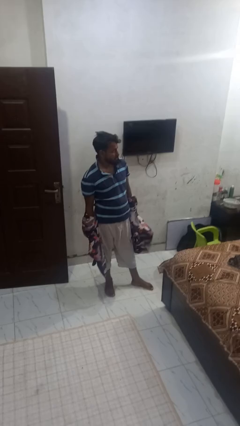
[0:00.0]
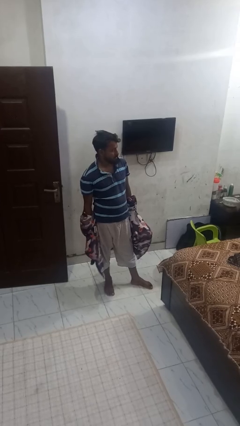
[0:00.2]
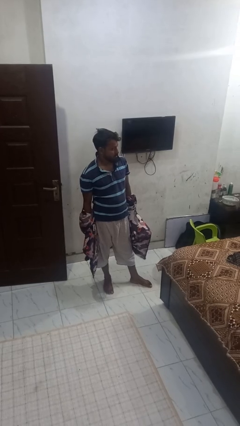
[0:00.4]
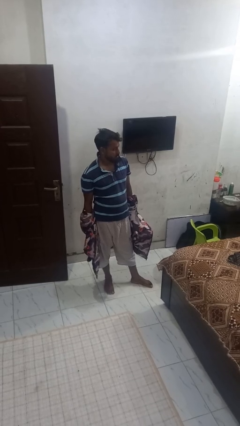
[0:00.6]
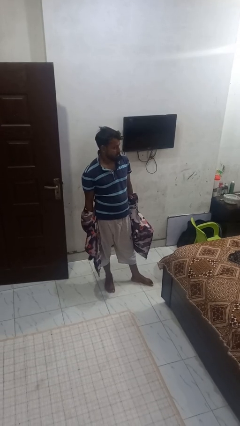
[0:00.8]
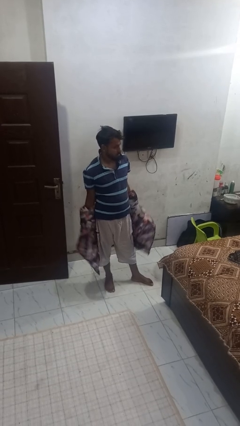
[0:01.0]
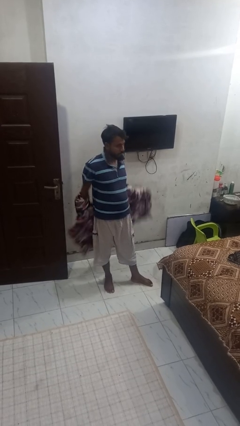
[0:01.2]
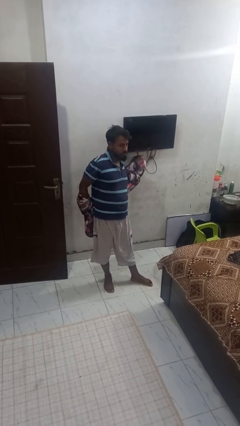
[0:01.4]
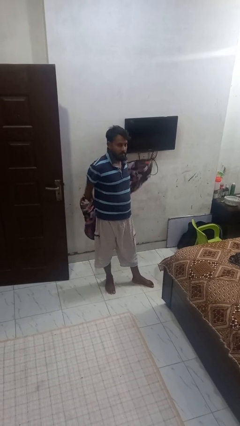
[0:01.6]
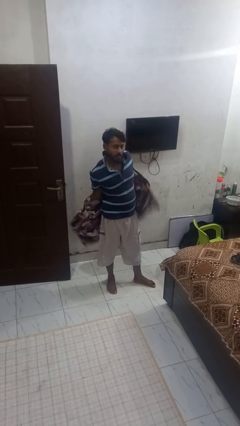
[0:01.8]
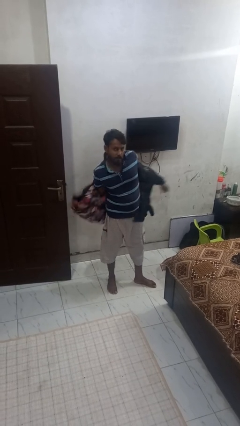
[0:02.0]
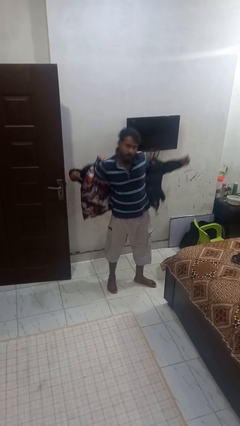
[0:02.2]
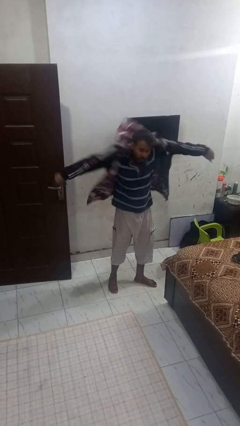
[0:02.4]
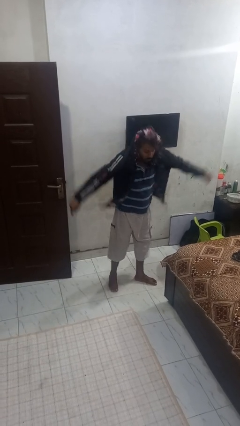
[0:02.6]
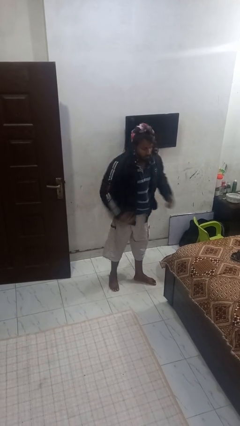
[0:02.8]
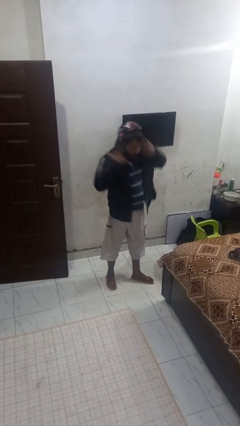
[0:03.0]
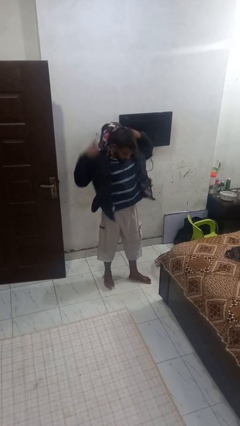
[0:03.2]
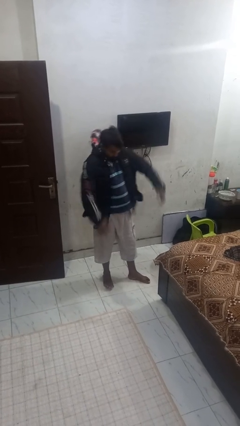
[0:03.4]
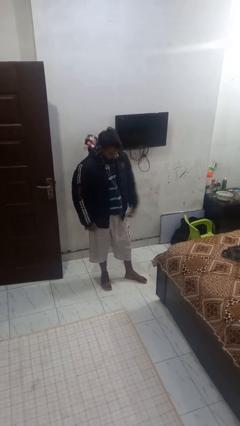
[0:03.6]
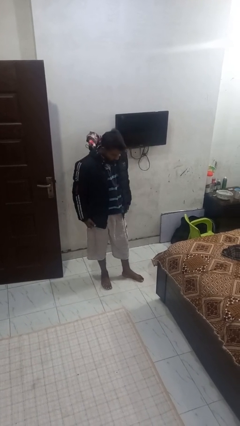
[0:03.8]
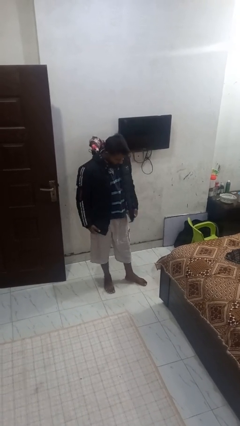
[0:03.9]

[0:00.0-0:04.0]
person puts on jacket

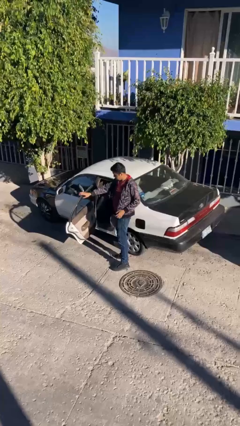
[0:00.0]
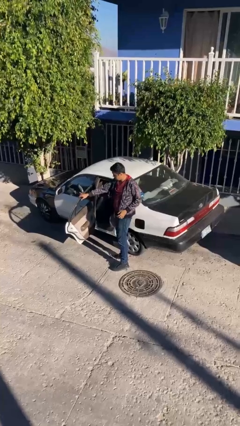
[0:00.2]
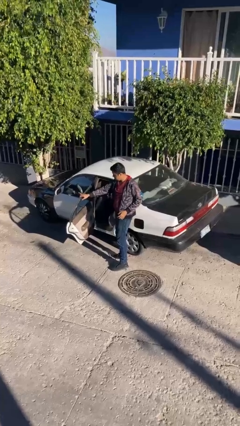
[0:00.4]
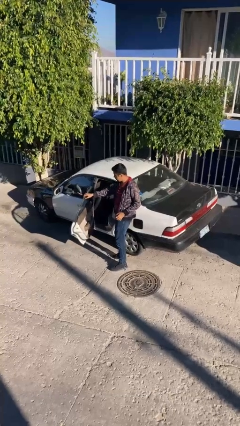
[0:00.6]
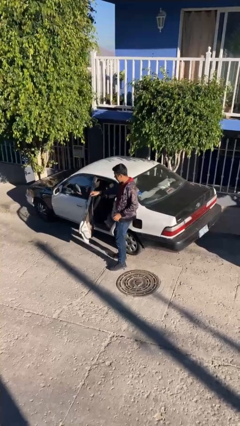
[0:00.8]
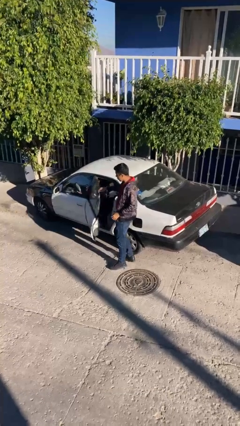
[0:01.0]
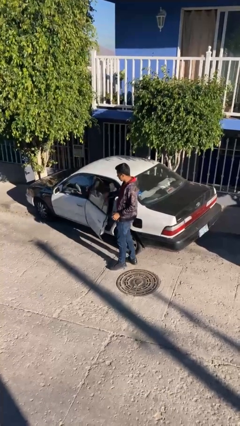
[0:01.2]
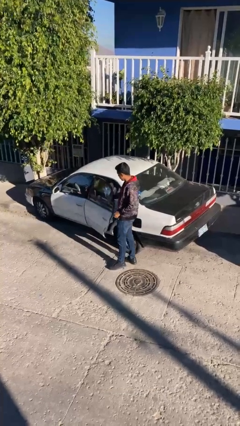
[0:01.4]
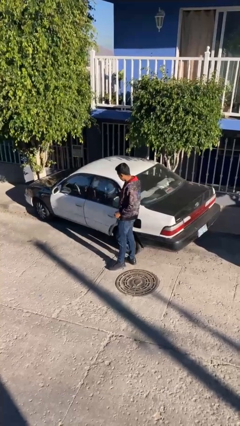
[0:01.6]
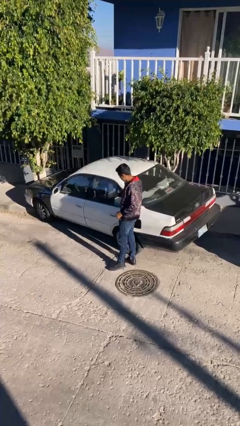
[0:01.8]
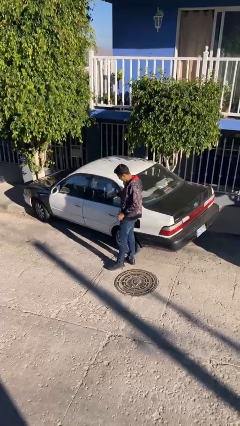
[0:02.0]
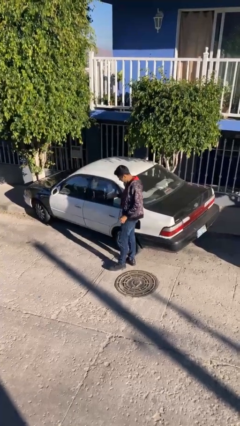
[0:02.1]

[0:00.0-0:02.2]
person closes car door

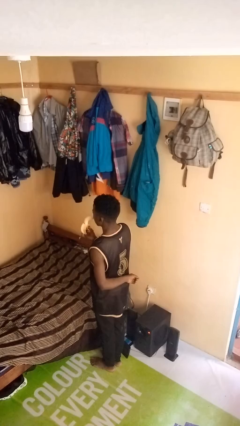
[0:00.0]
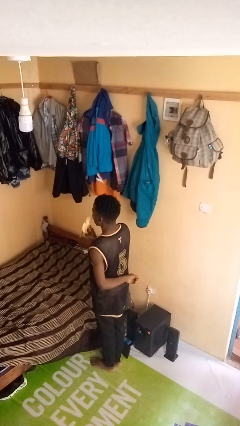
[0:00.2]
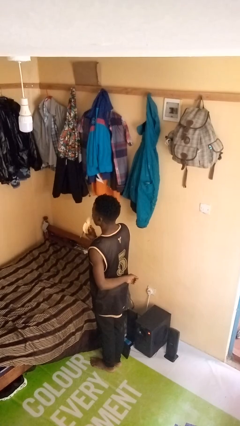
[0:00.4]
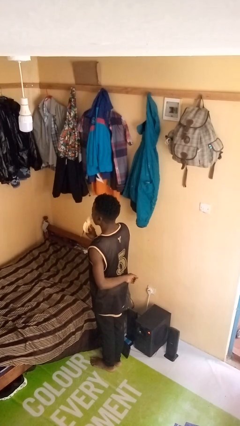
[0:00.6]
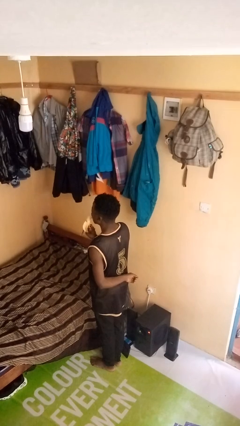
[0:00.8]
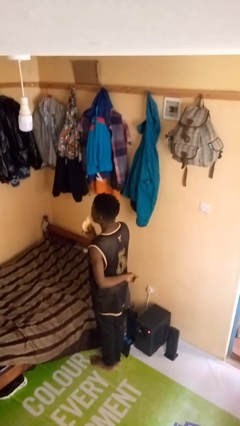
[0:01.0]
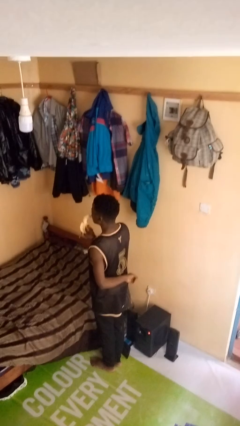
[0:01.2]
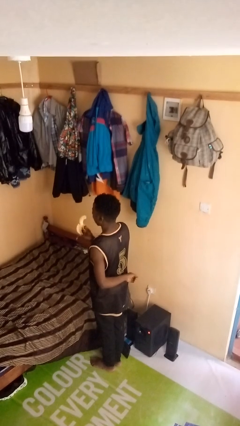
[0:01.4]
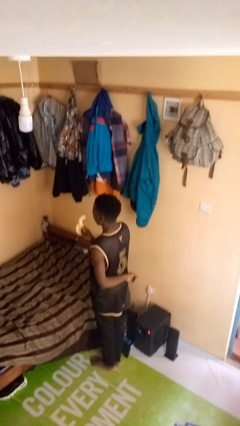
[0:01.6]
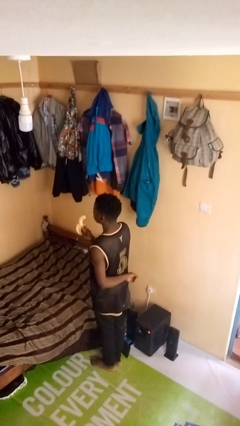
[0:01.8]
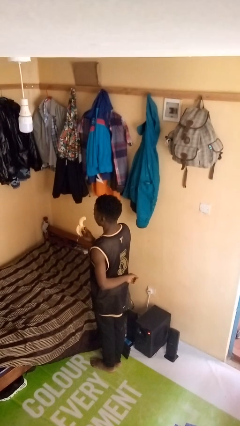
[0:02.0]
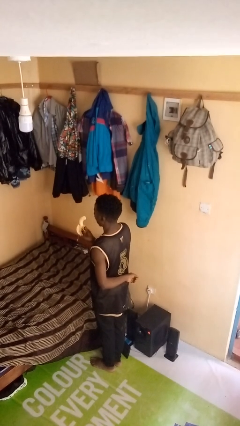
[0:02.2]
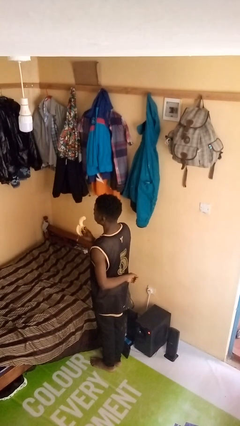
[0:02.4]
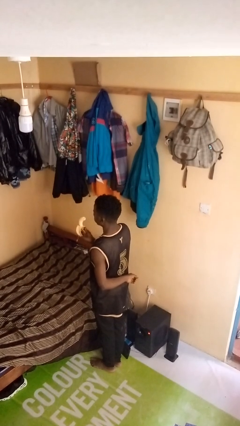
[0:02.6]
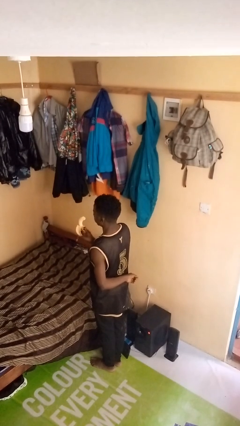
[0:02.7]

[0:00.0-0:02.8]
person eats banana

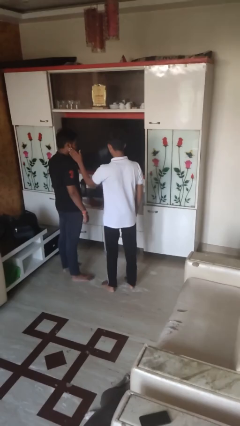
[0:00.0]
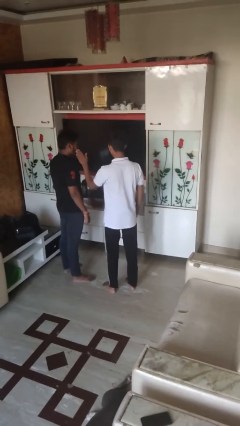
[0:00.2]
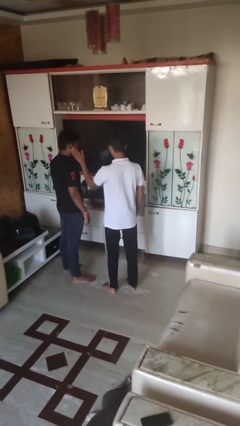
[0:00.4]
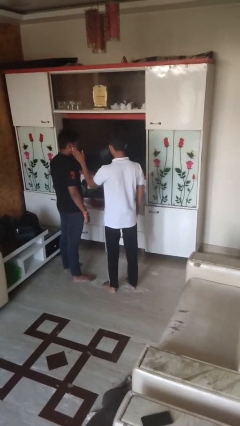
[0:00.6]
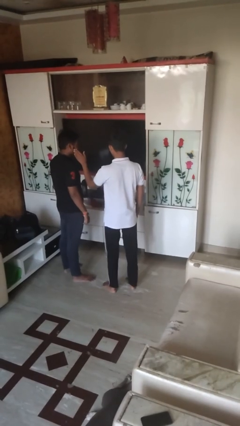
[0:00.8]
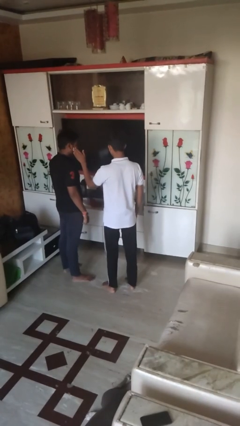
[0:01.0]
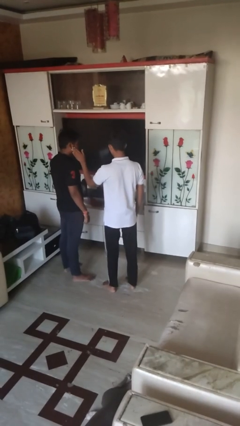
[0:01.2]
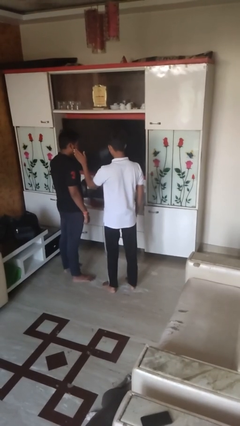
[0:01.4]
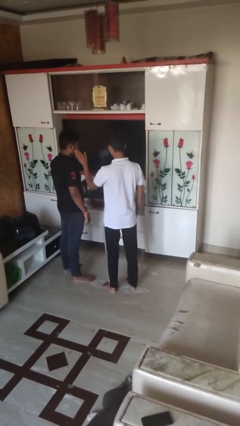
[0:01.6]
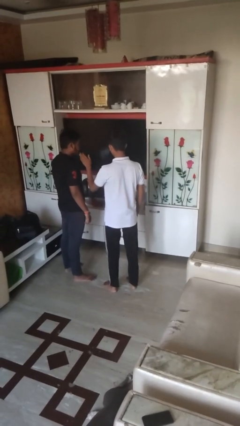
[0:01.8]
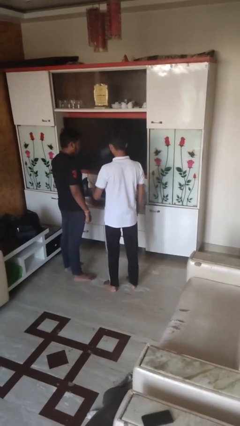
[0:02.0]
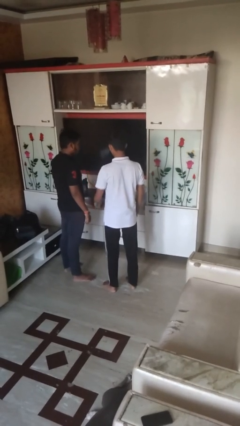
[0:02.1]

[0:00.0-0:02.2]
person touches face of person

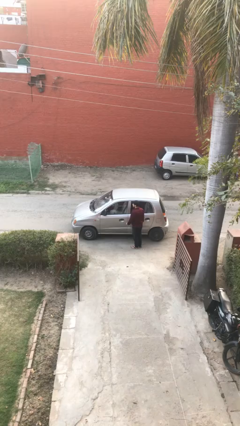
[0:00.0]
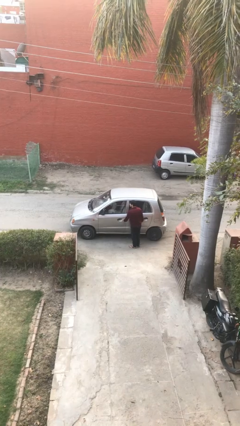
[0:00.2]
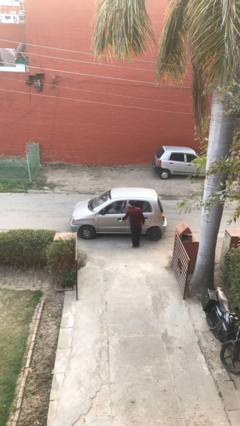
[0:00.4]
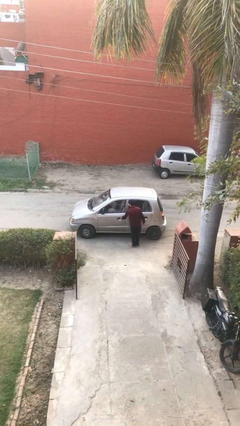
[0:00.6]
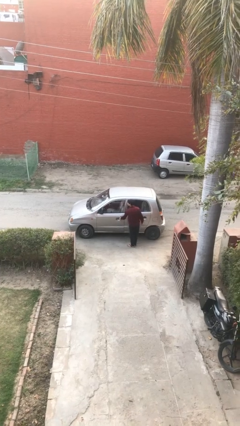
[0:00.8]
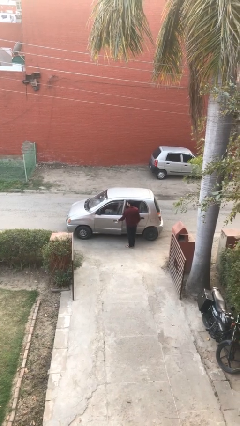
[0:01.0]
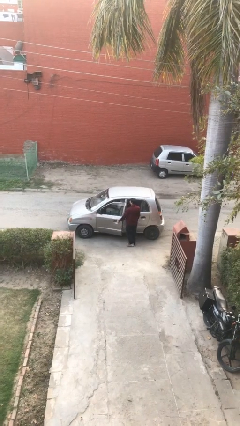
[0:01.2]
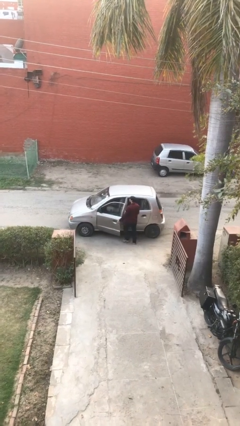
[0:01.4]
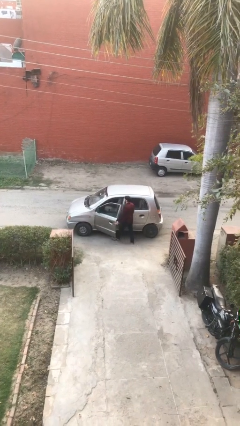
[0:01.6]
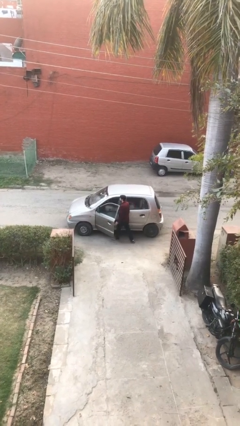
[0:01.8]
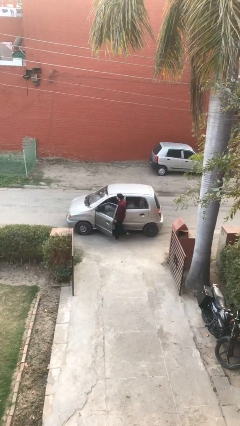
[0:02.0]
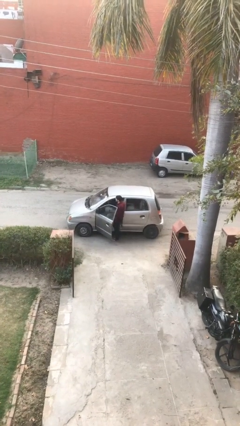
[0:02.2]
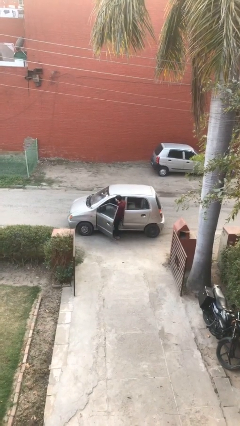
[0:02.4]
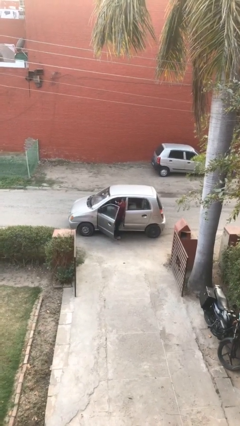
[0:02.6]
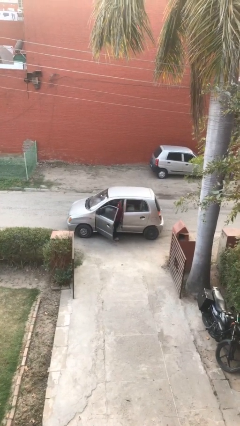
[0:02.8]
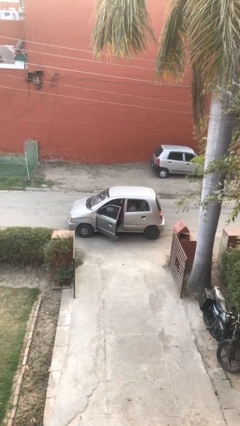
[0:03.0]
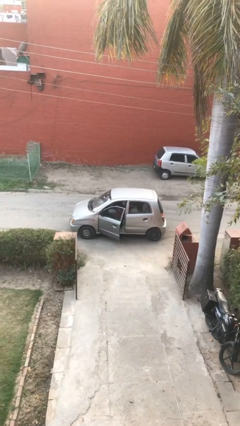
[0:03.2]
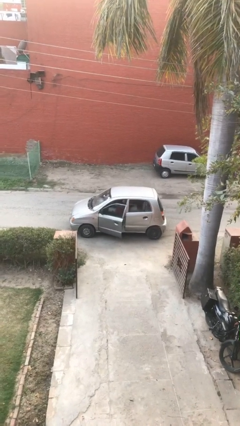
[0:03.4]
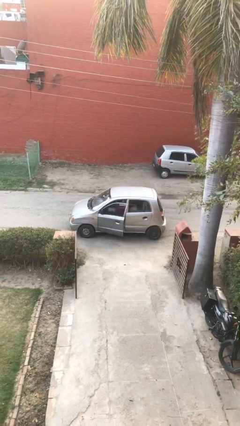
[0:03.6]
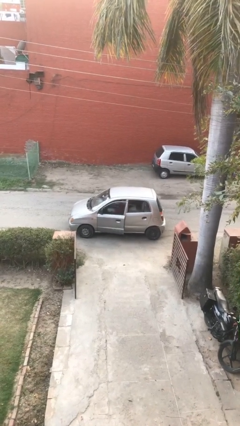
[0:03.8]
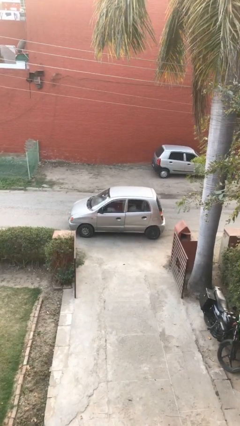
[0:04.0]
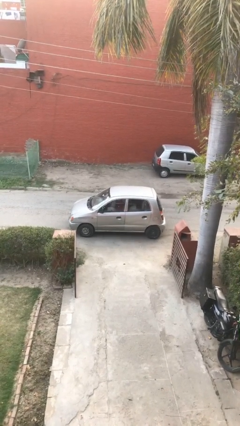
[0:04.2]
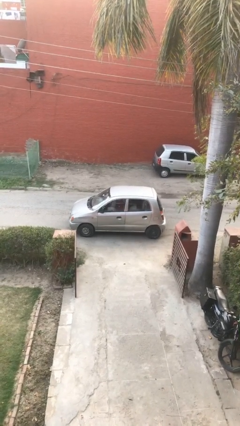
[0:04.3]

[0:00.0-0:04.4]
car picks up person

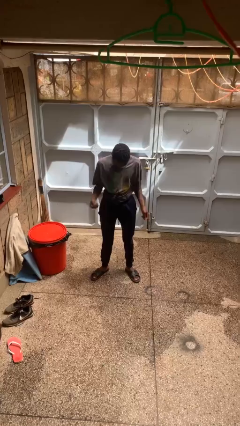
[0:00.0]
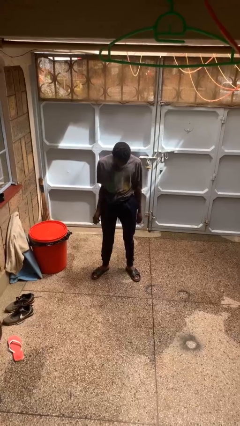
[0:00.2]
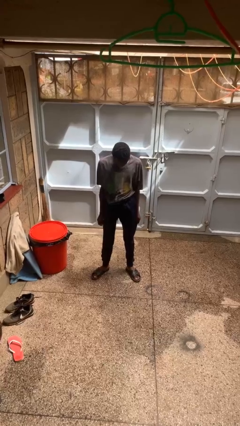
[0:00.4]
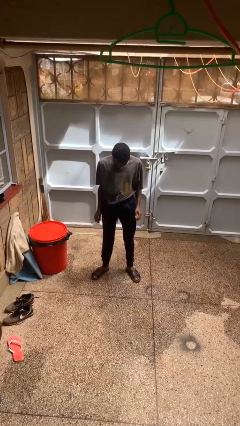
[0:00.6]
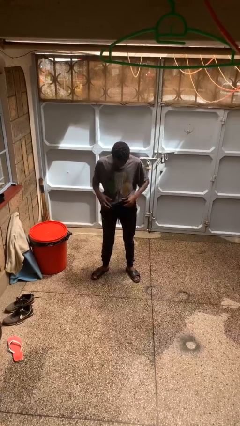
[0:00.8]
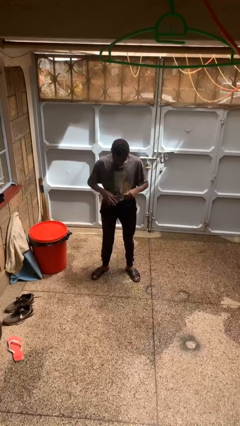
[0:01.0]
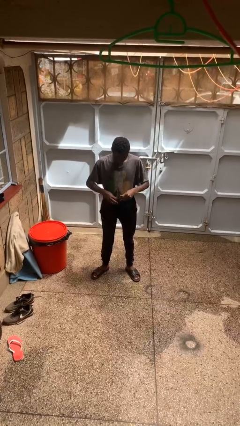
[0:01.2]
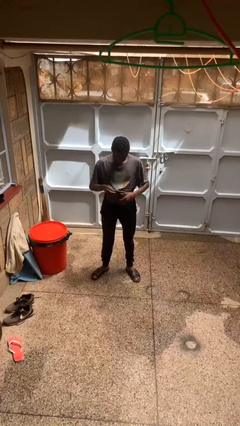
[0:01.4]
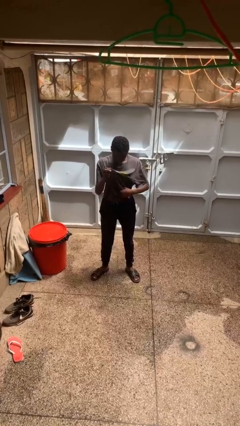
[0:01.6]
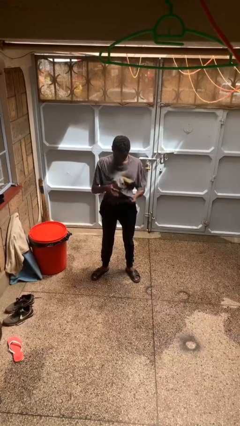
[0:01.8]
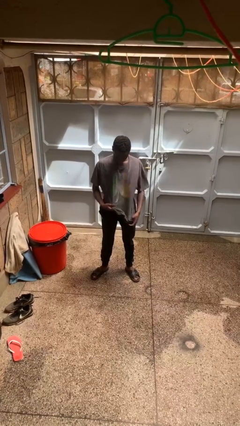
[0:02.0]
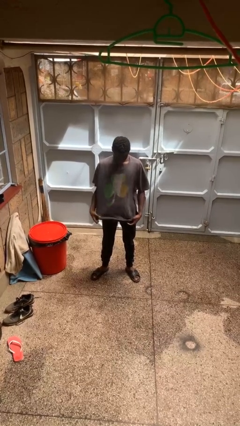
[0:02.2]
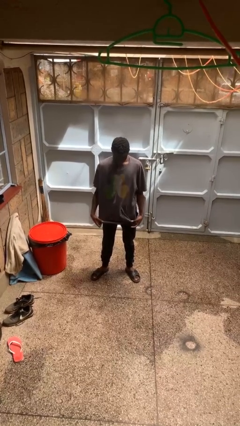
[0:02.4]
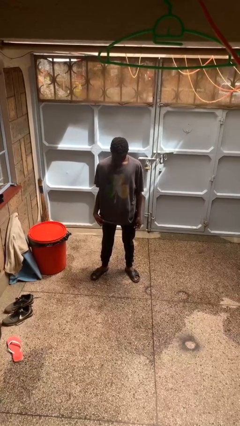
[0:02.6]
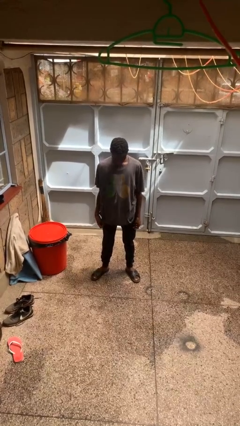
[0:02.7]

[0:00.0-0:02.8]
person untucks shirt
